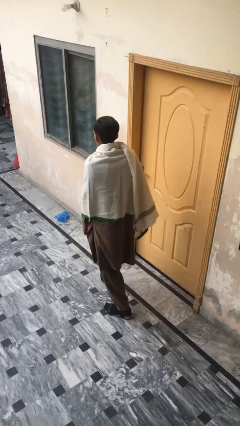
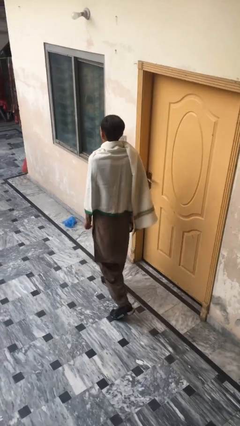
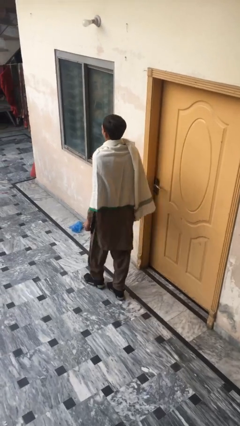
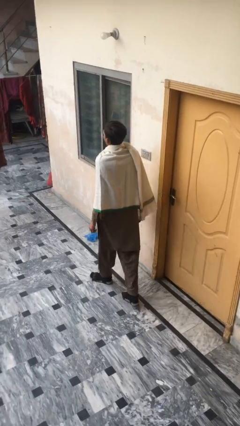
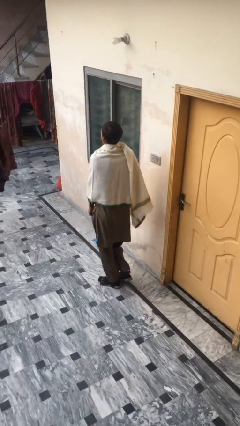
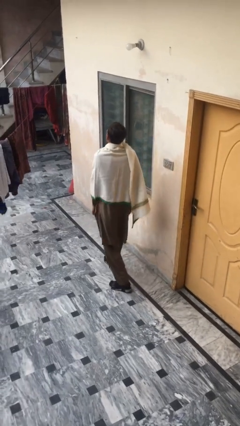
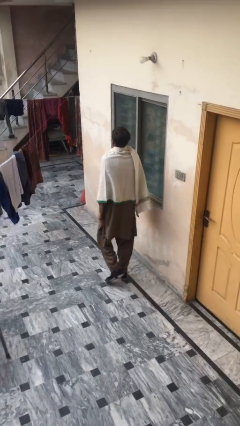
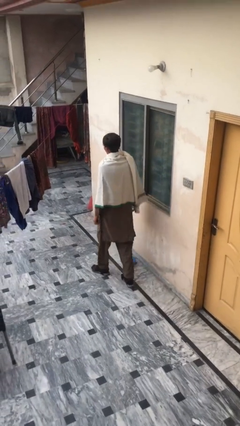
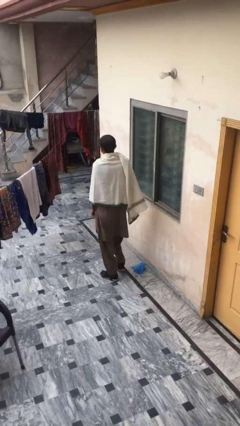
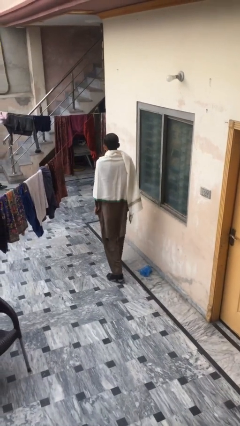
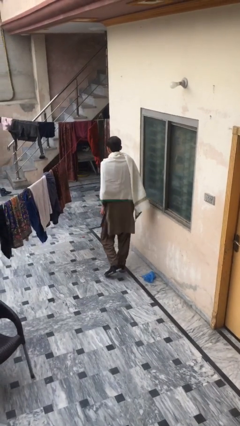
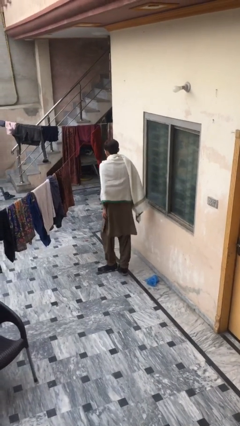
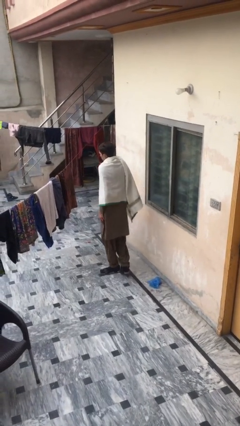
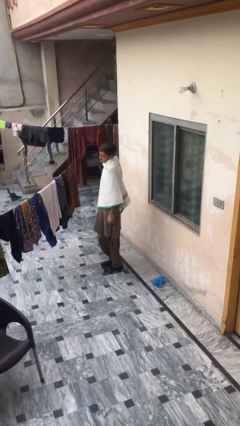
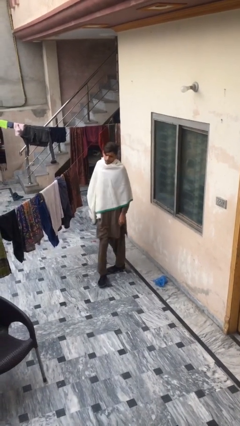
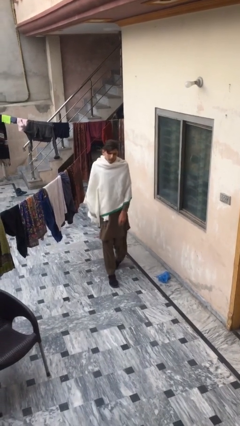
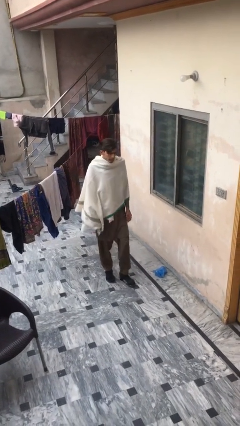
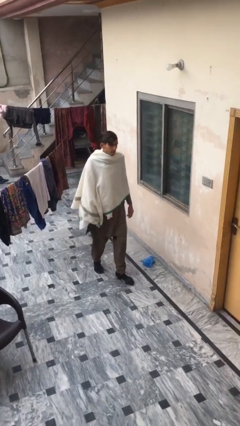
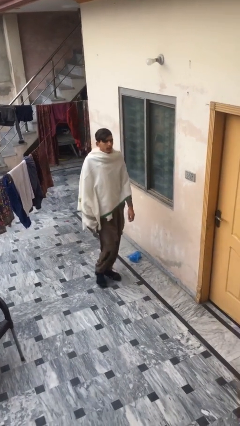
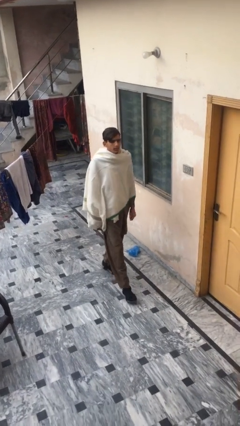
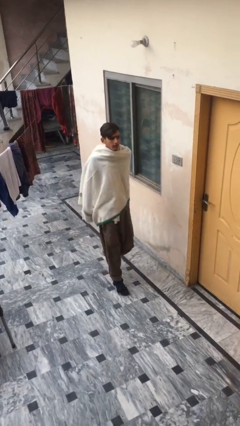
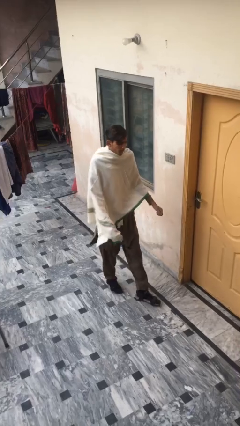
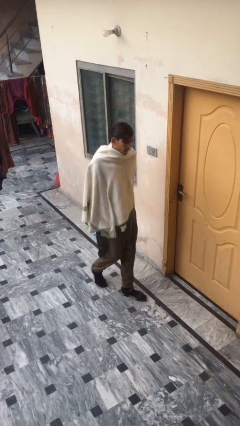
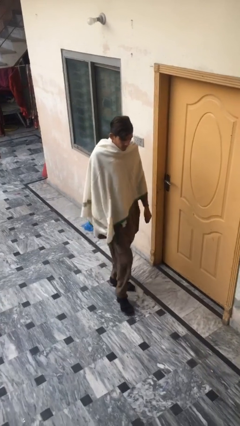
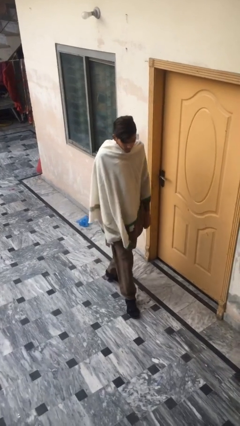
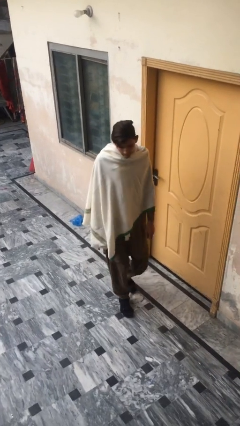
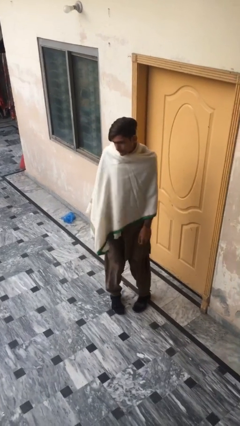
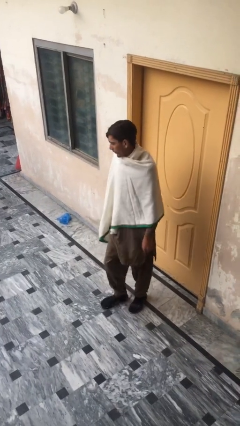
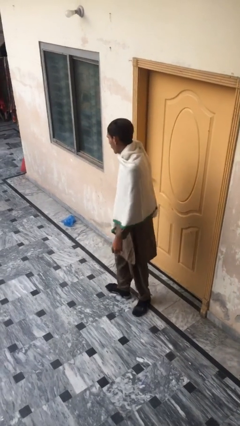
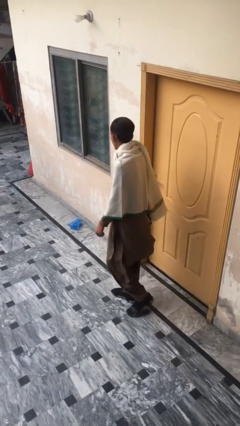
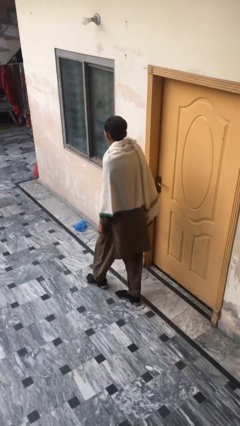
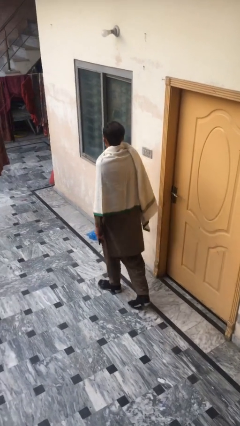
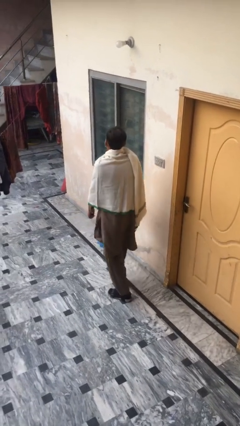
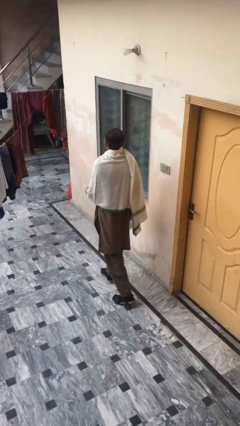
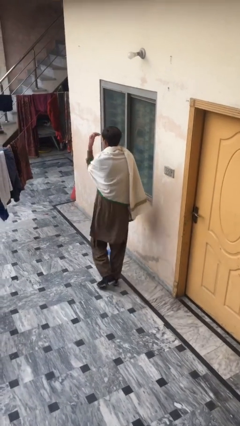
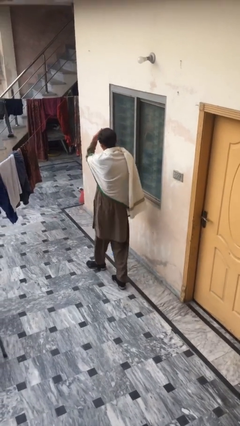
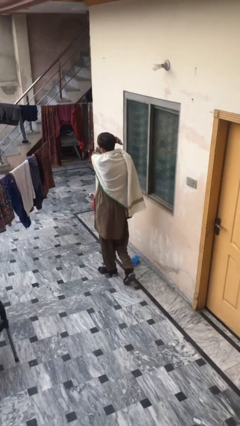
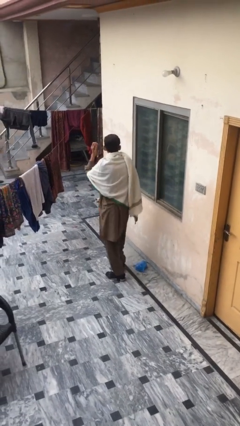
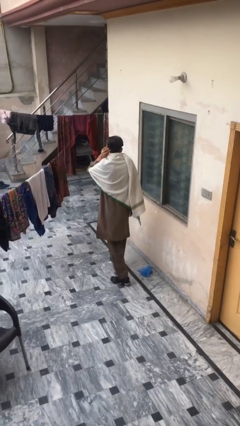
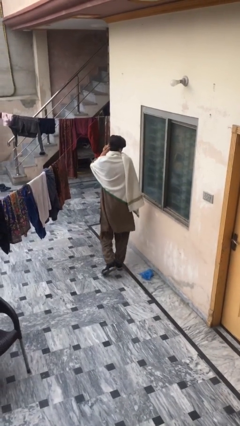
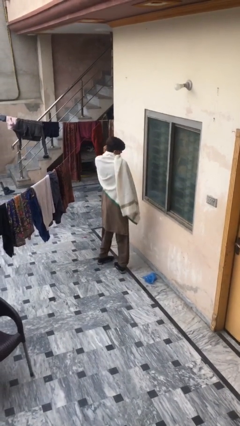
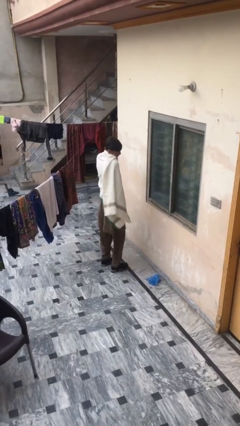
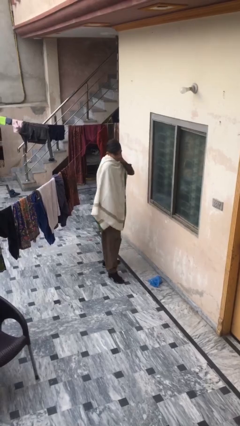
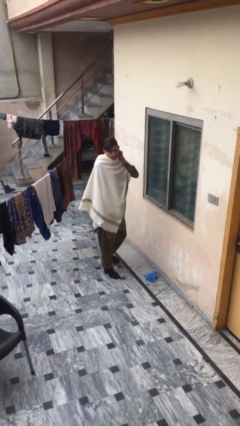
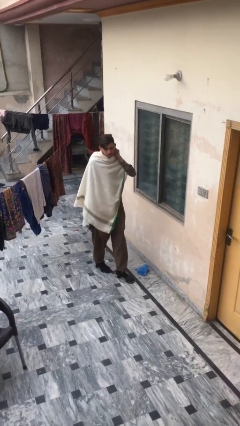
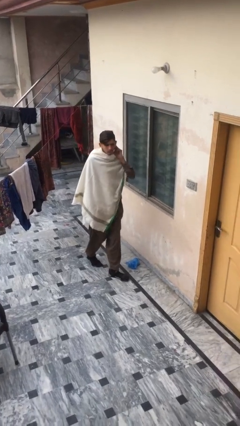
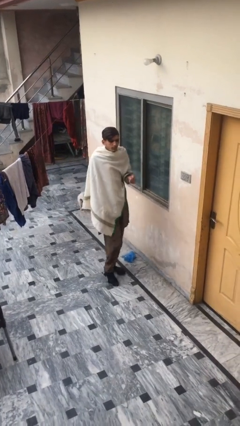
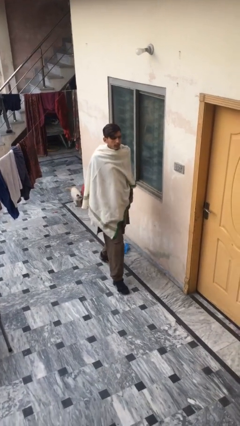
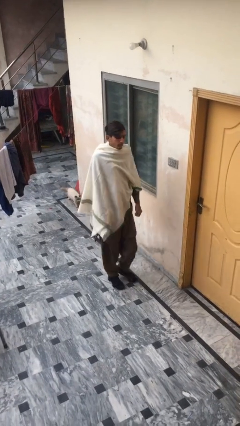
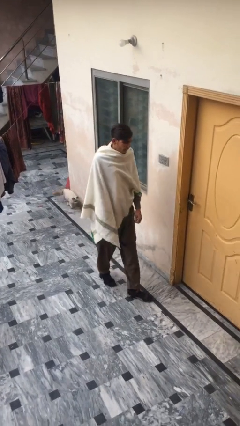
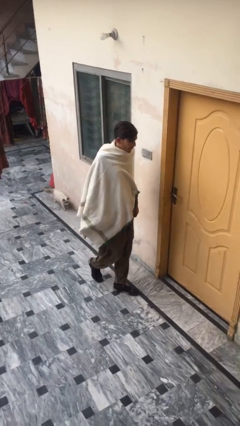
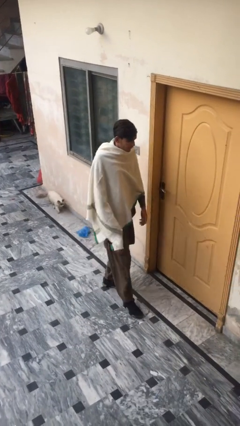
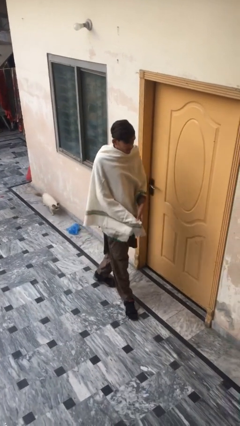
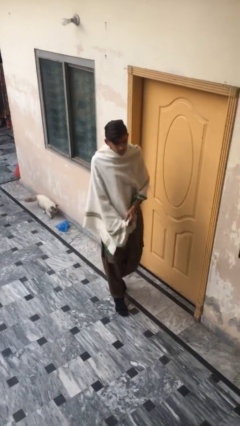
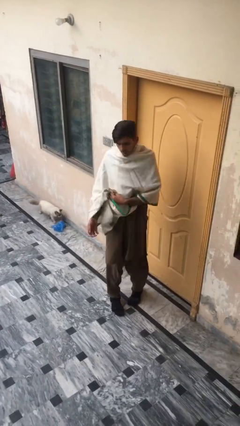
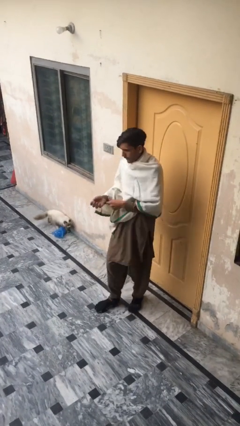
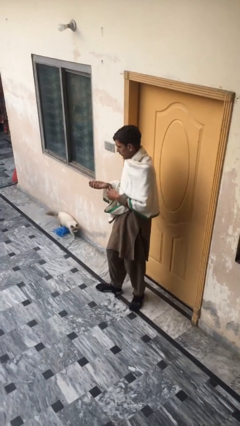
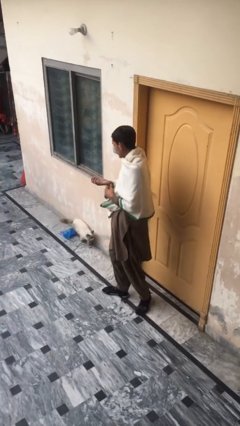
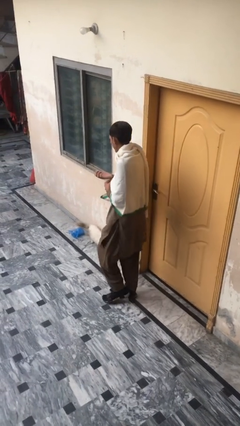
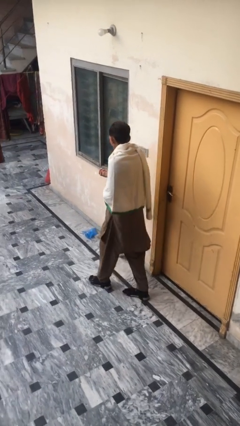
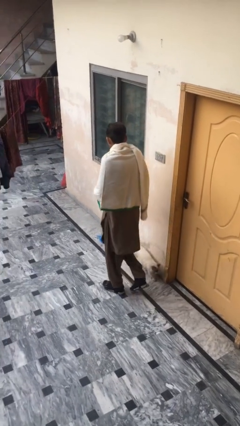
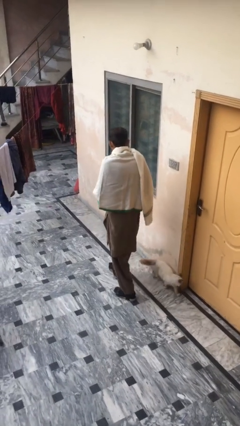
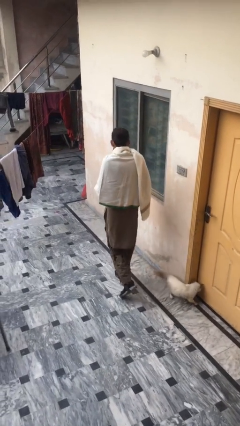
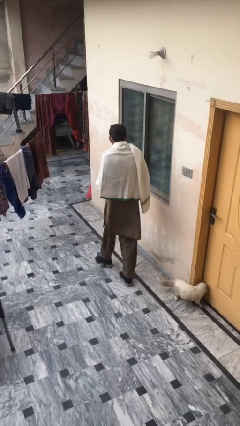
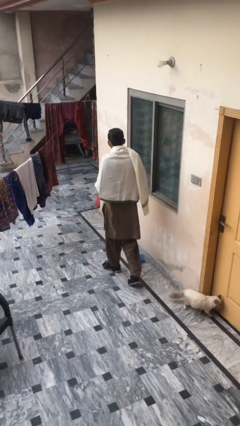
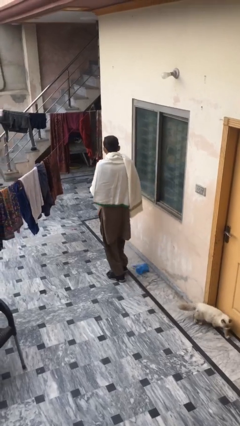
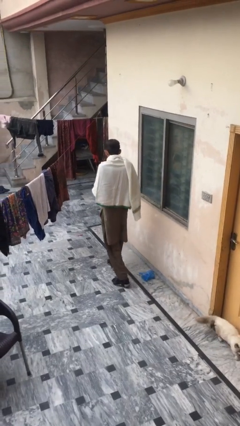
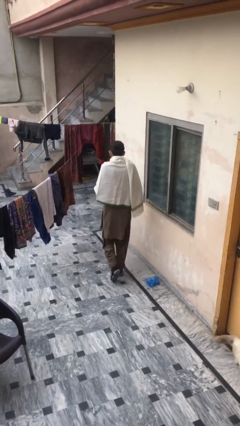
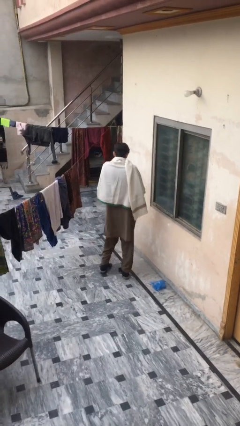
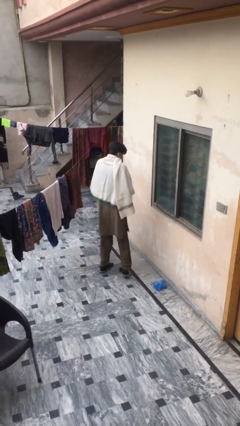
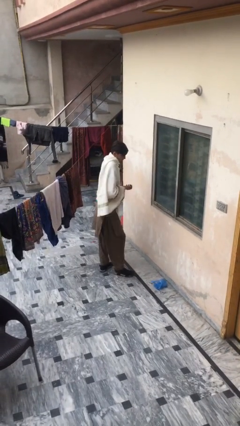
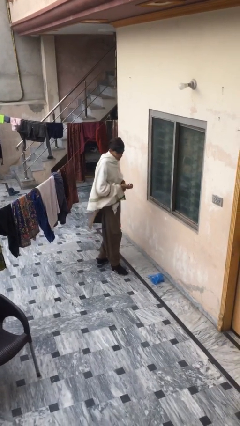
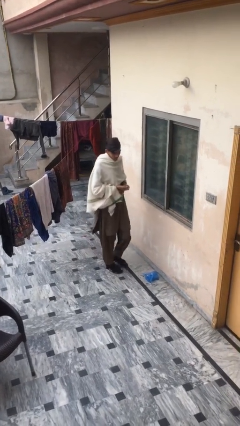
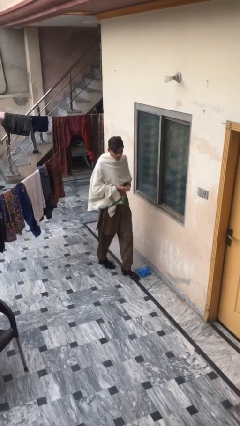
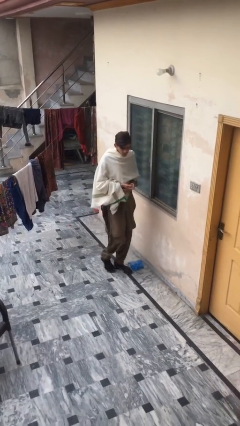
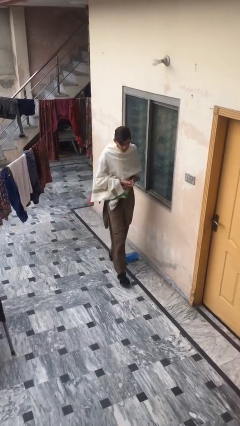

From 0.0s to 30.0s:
person walks

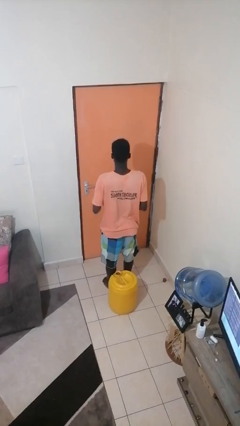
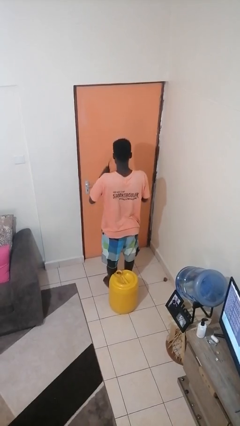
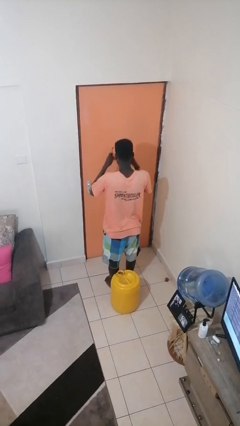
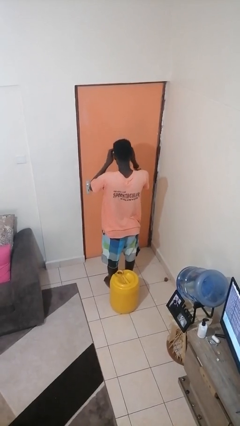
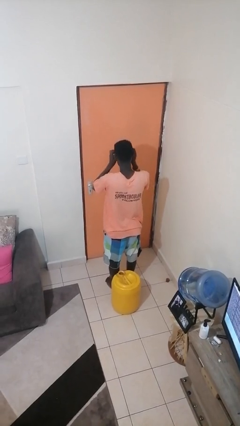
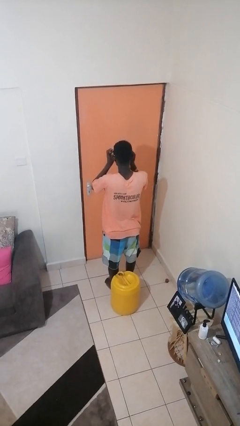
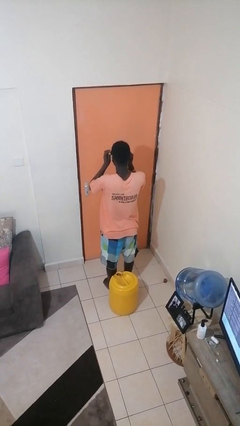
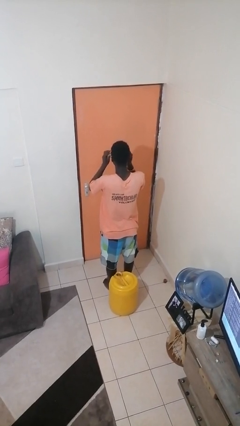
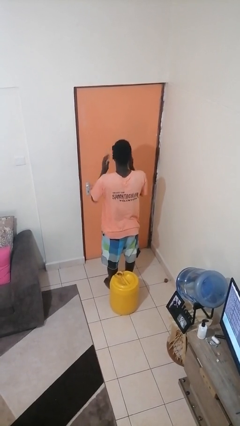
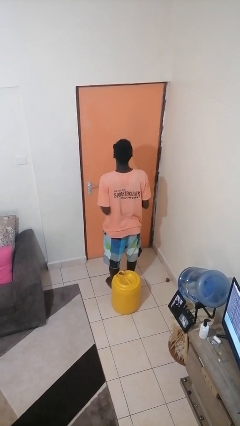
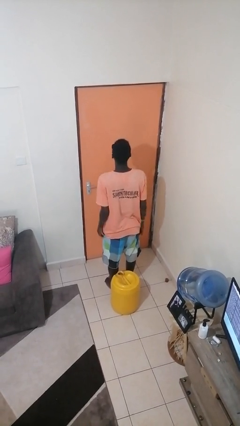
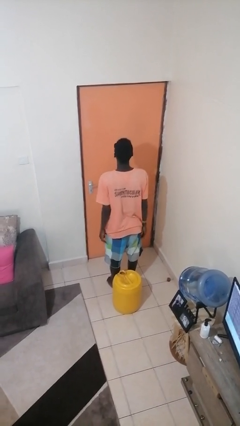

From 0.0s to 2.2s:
person puts on sunglasses

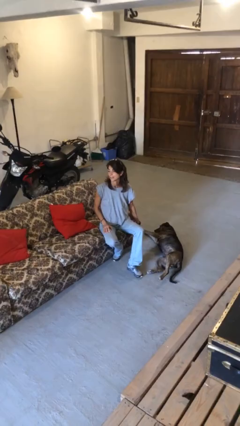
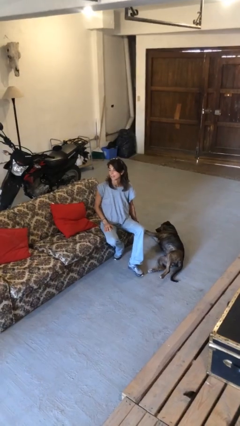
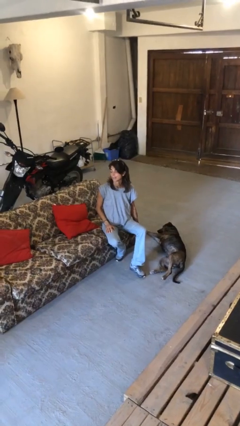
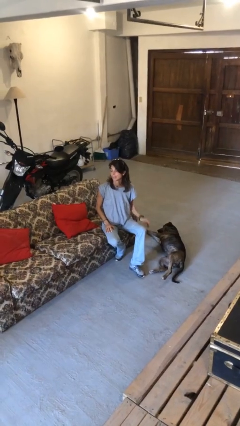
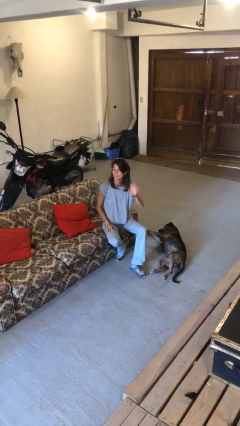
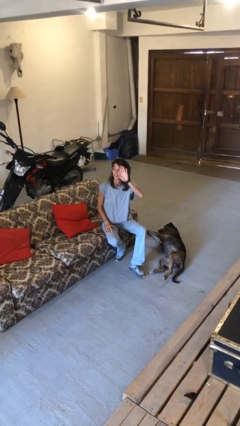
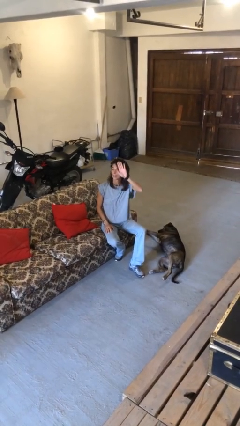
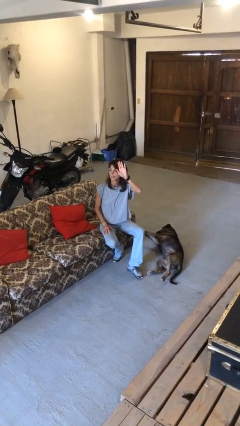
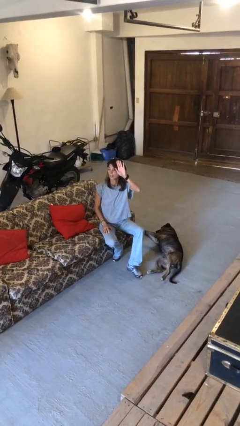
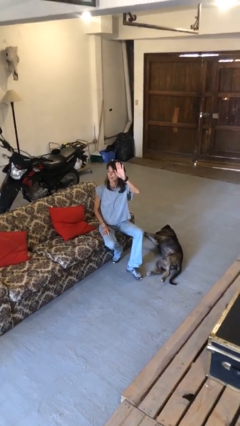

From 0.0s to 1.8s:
person gestures raise hand
